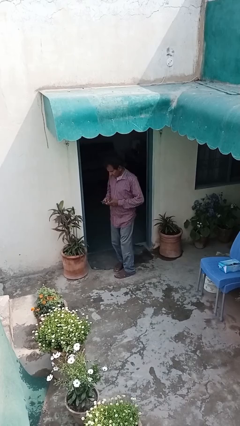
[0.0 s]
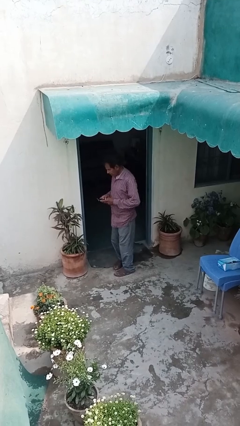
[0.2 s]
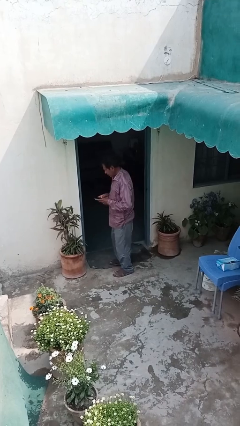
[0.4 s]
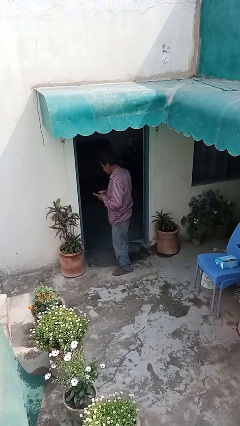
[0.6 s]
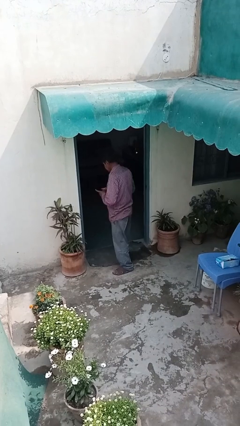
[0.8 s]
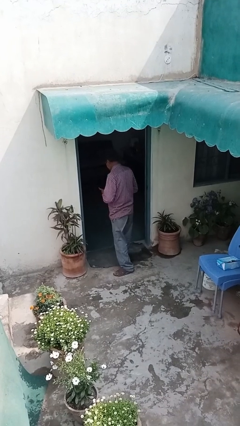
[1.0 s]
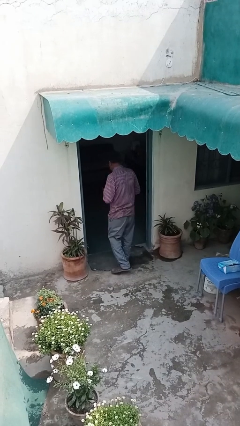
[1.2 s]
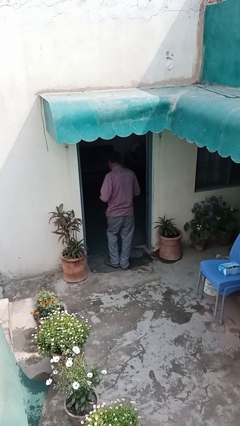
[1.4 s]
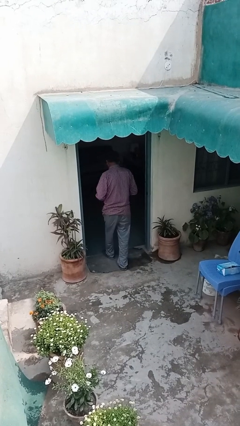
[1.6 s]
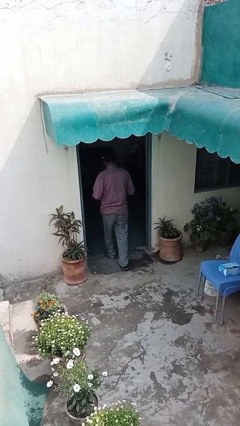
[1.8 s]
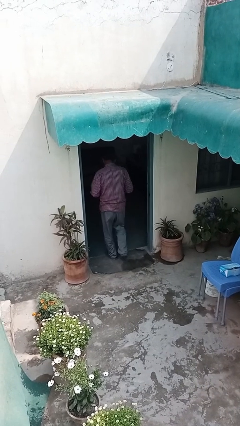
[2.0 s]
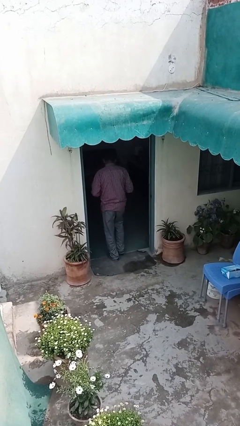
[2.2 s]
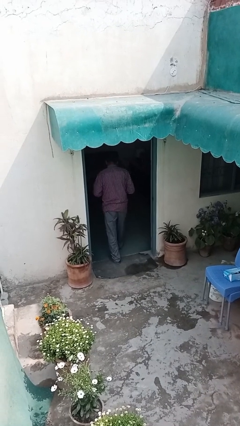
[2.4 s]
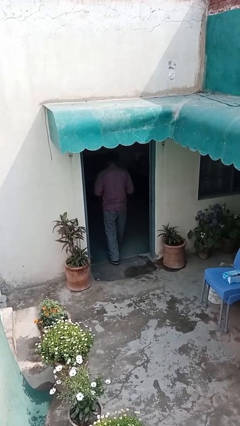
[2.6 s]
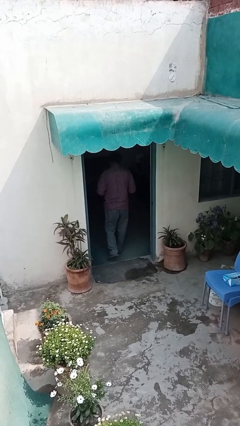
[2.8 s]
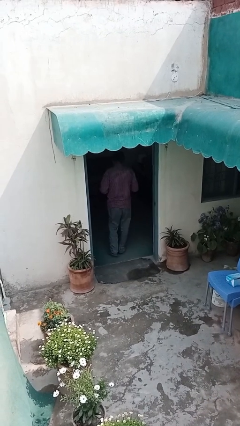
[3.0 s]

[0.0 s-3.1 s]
person exits scene through structure

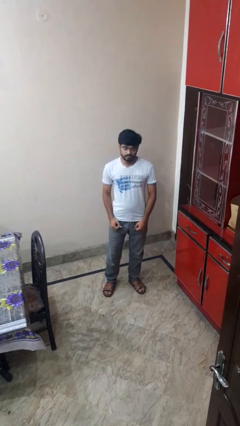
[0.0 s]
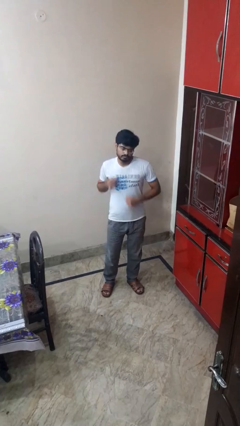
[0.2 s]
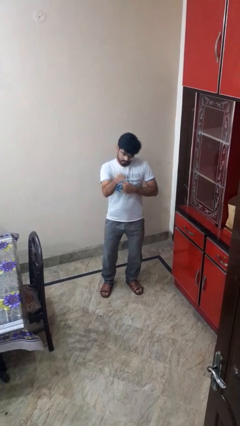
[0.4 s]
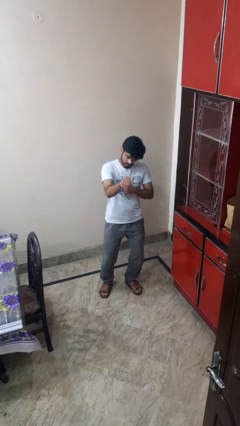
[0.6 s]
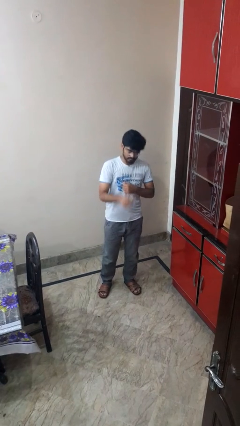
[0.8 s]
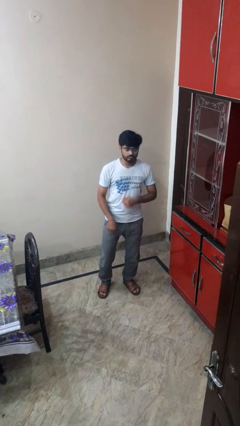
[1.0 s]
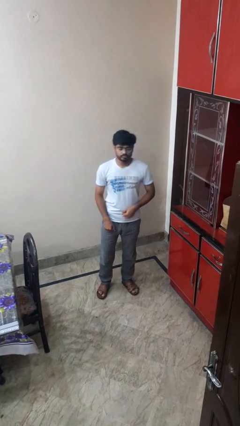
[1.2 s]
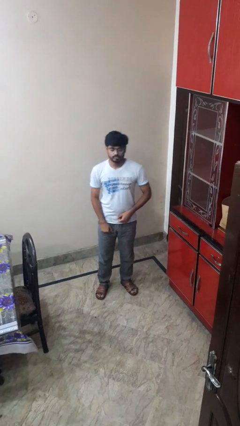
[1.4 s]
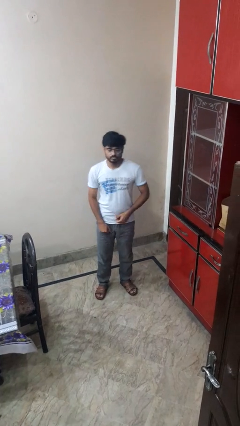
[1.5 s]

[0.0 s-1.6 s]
person punches

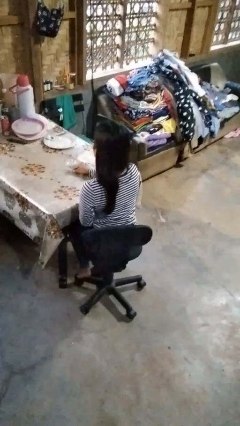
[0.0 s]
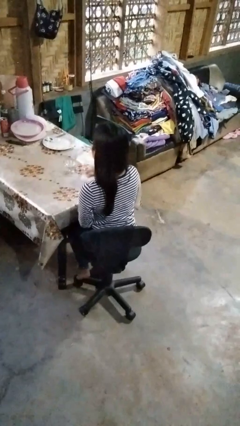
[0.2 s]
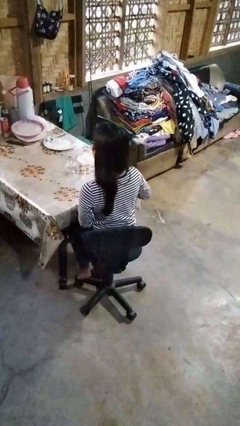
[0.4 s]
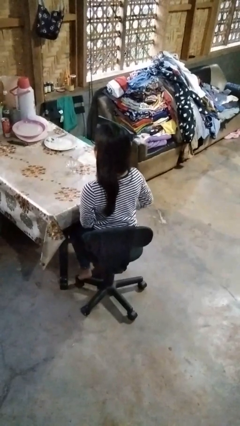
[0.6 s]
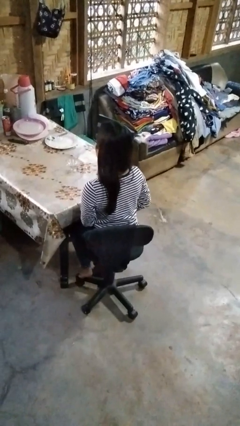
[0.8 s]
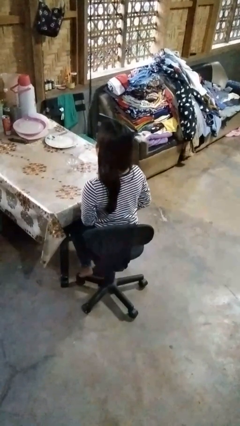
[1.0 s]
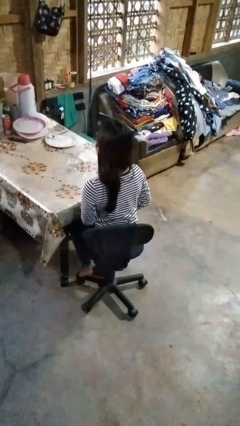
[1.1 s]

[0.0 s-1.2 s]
person sets upright glass

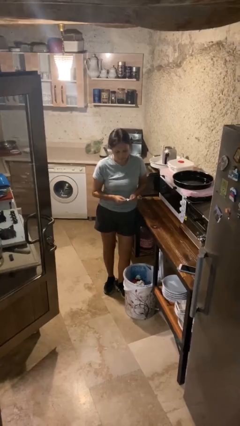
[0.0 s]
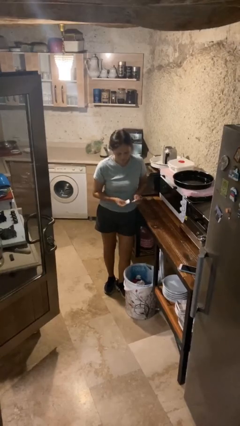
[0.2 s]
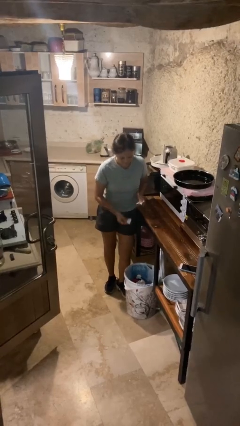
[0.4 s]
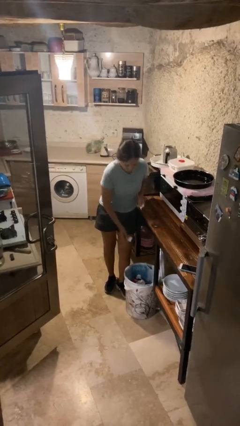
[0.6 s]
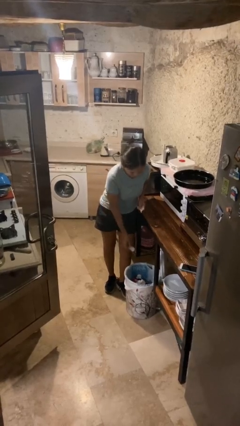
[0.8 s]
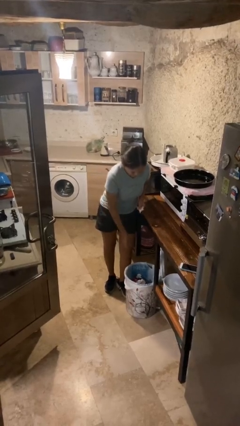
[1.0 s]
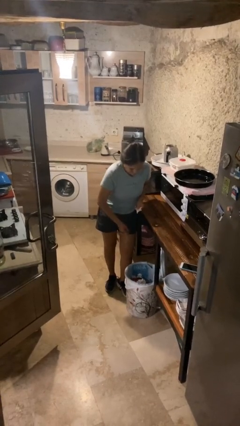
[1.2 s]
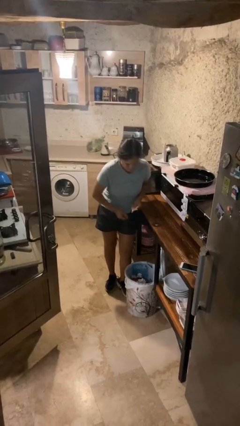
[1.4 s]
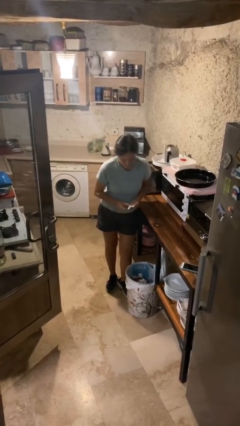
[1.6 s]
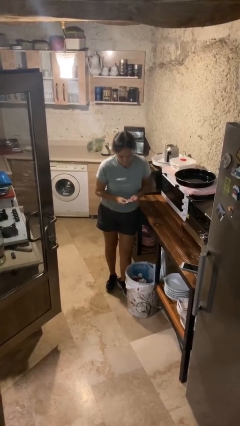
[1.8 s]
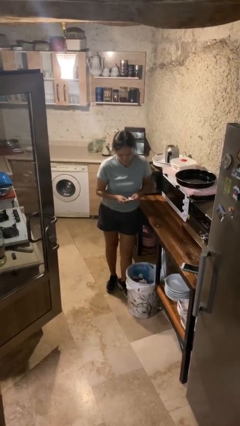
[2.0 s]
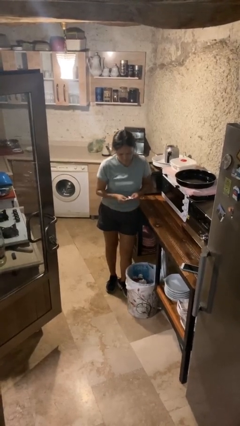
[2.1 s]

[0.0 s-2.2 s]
person discards trash

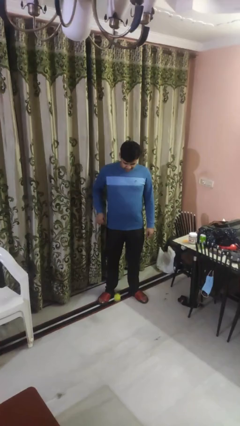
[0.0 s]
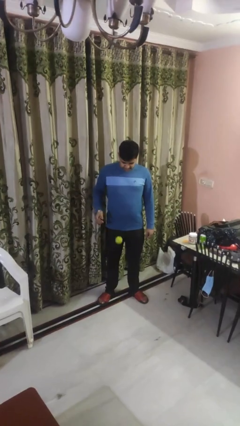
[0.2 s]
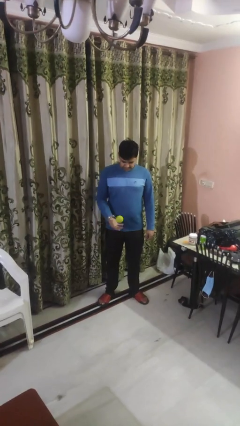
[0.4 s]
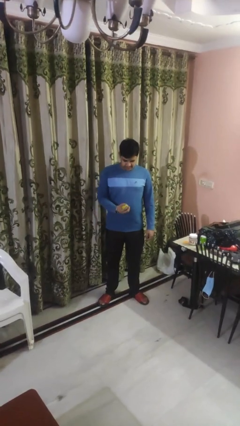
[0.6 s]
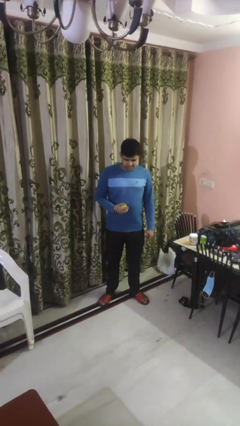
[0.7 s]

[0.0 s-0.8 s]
person bounces ball on floor

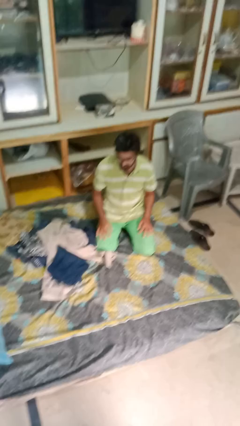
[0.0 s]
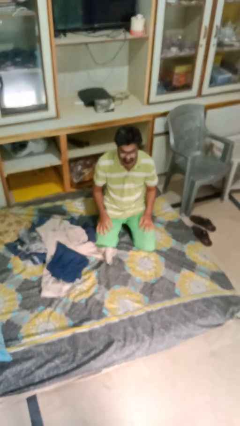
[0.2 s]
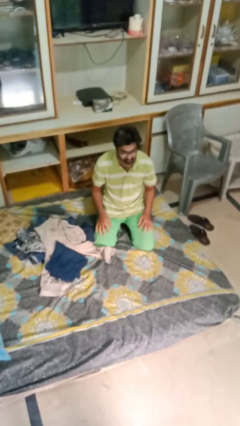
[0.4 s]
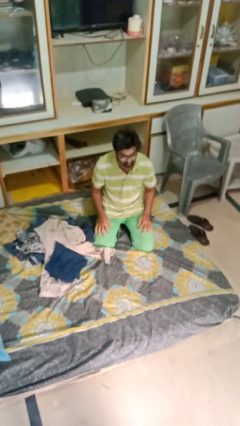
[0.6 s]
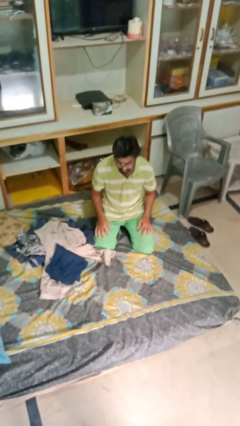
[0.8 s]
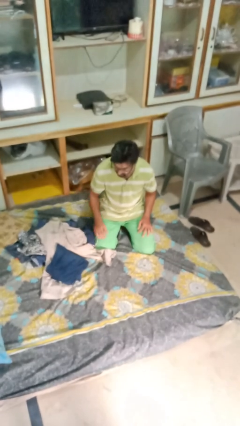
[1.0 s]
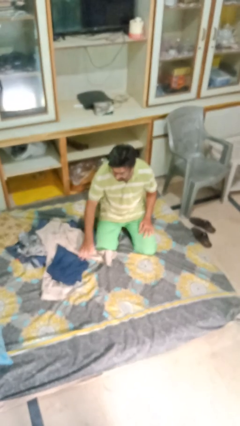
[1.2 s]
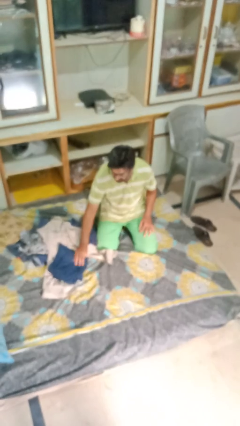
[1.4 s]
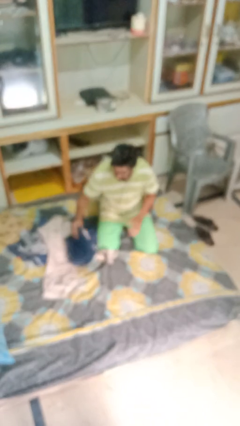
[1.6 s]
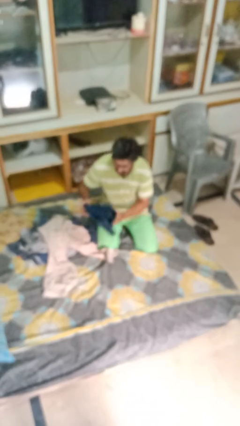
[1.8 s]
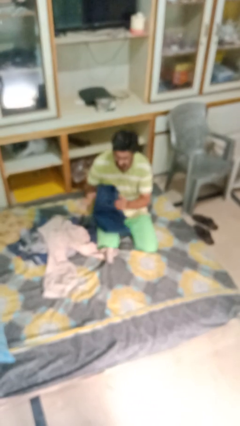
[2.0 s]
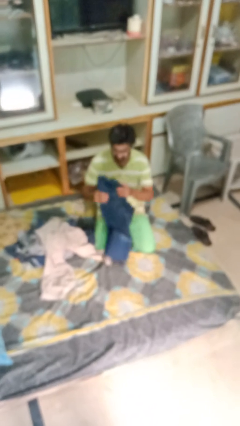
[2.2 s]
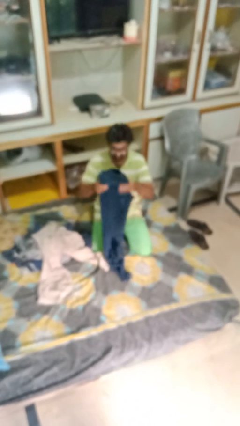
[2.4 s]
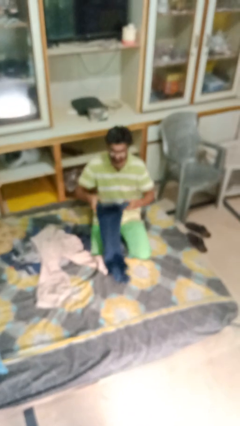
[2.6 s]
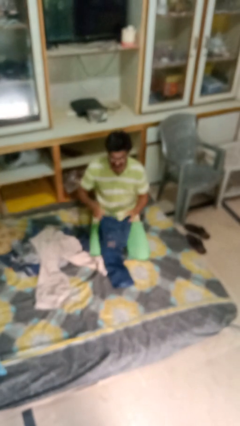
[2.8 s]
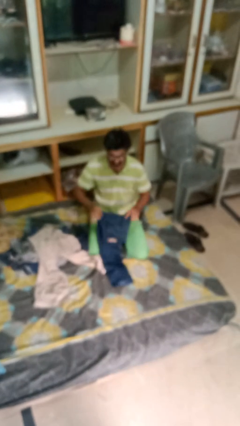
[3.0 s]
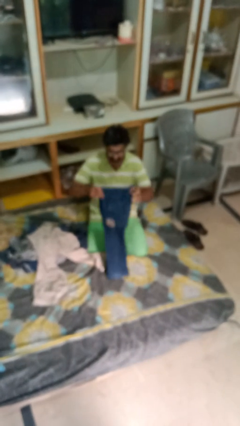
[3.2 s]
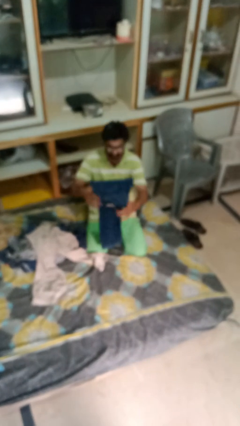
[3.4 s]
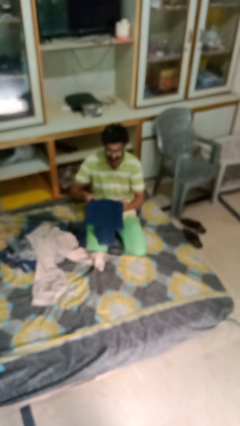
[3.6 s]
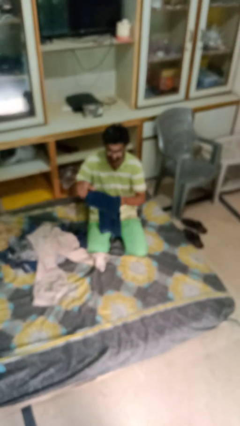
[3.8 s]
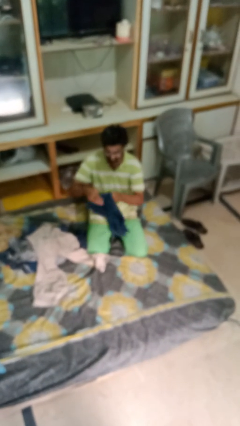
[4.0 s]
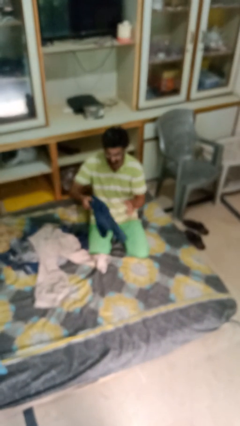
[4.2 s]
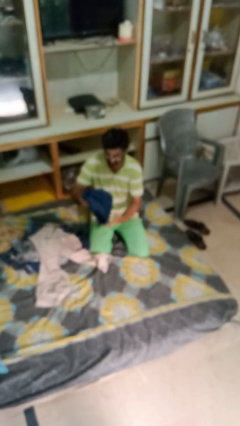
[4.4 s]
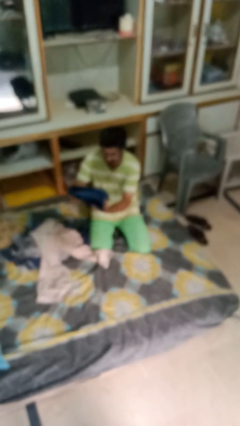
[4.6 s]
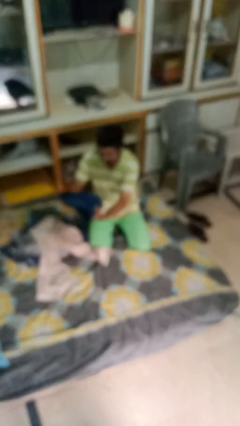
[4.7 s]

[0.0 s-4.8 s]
person folds pants

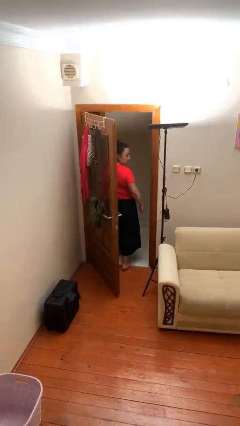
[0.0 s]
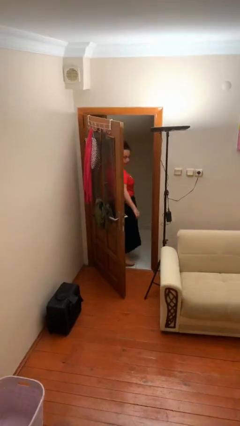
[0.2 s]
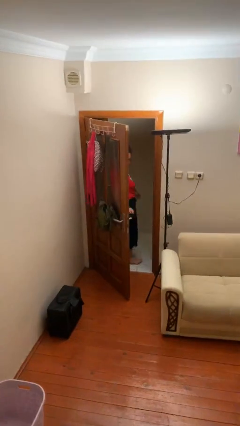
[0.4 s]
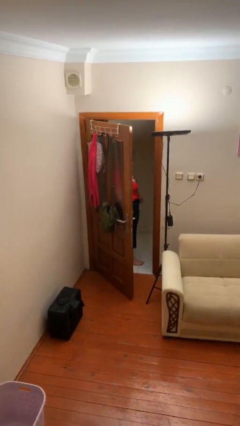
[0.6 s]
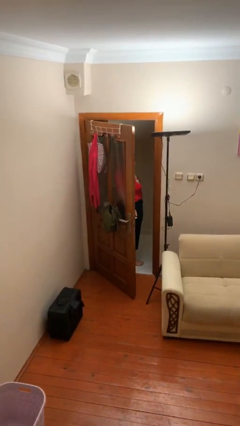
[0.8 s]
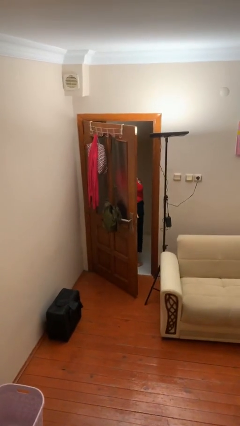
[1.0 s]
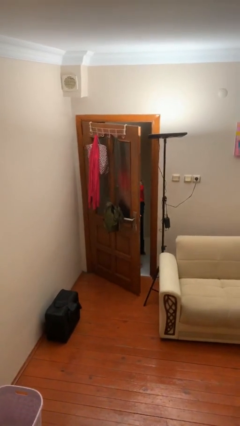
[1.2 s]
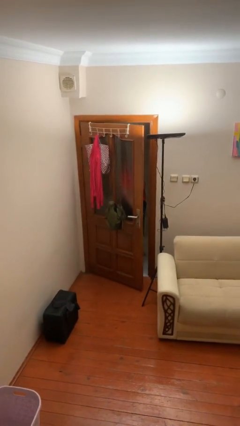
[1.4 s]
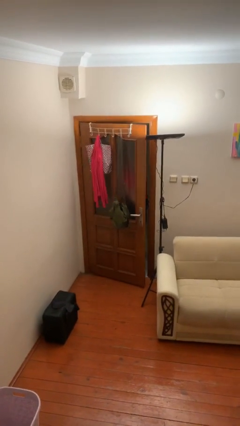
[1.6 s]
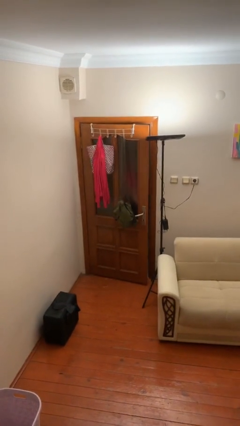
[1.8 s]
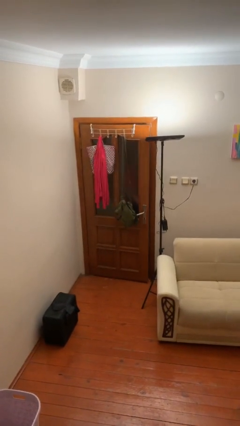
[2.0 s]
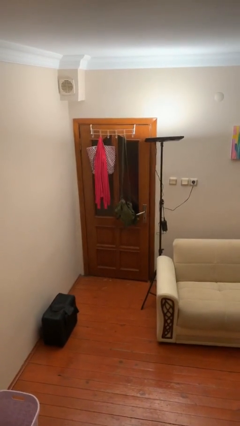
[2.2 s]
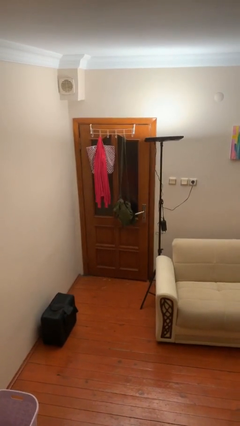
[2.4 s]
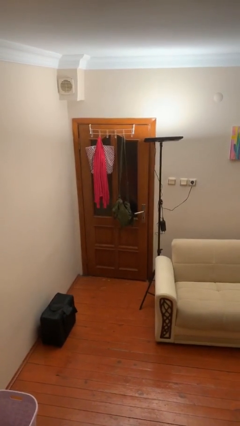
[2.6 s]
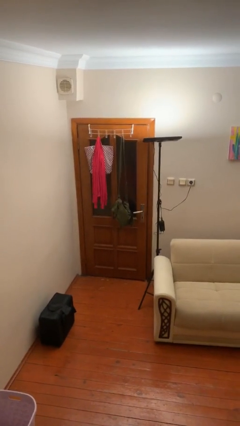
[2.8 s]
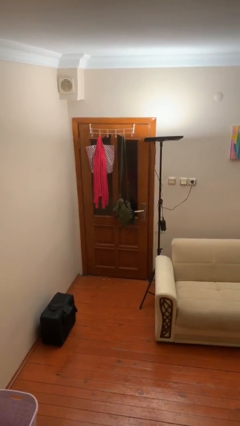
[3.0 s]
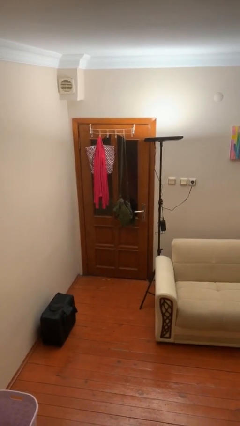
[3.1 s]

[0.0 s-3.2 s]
person closes facility door
